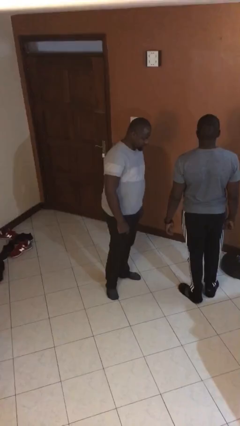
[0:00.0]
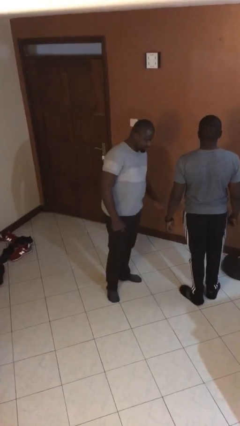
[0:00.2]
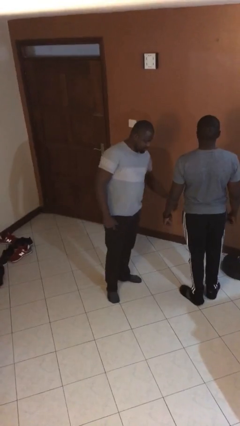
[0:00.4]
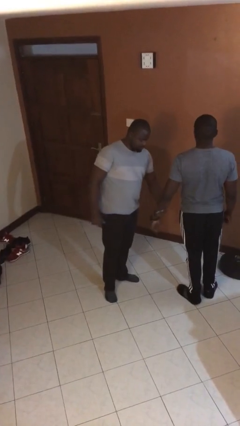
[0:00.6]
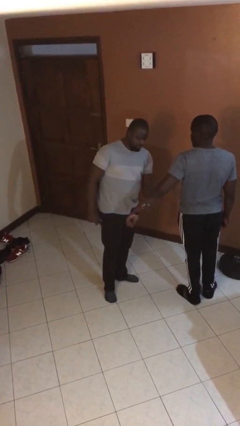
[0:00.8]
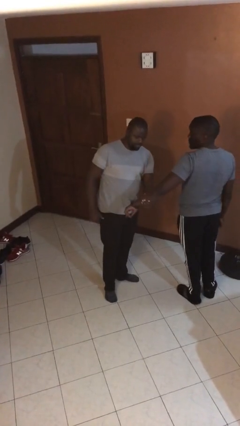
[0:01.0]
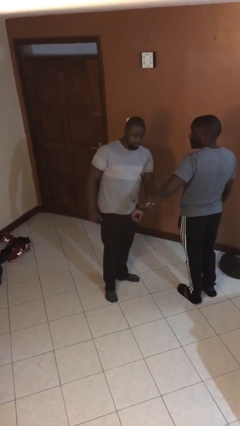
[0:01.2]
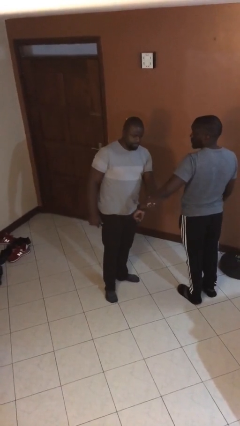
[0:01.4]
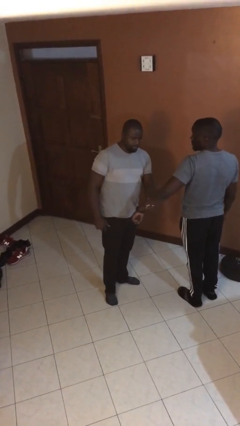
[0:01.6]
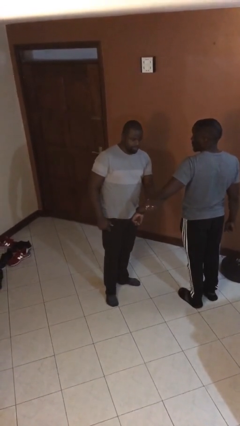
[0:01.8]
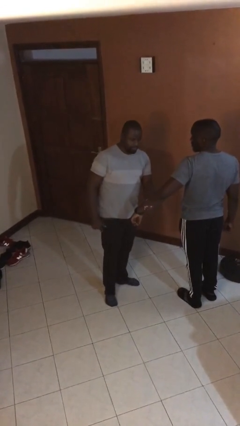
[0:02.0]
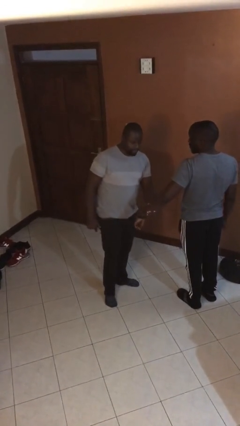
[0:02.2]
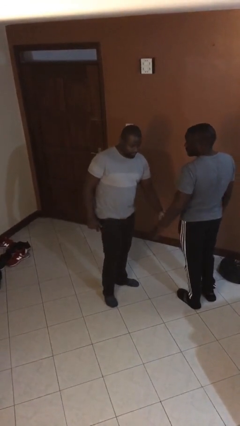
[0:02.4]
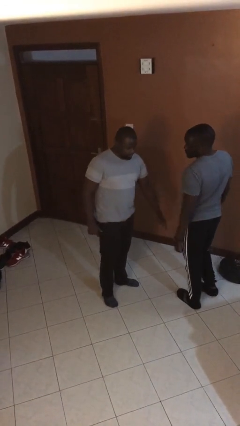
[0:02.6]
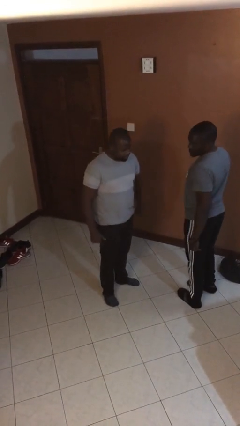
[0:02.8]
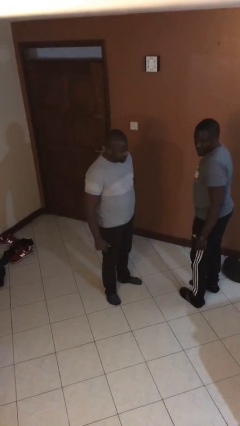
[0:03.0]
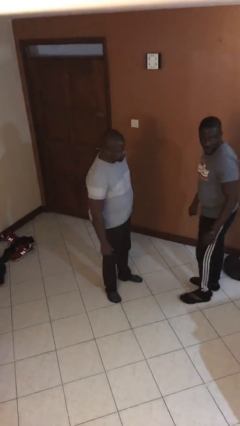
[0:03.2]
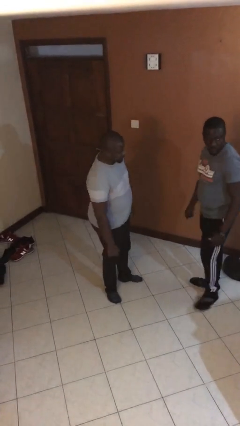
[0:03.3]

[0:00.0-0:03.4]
person grabs person by forearm

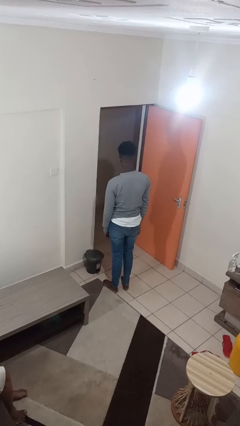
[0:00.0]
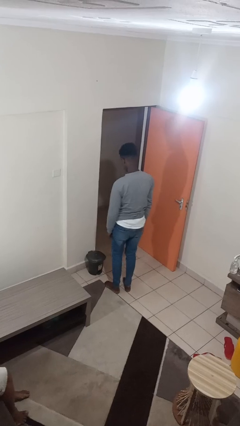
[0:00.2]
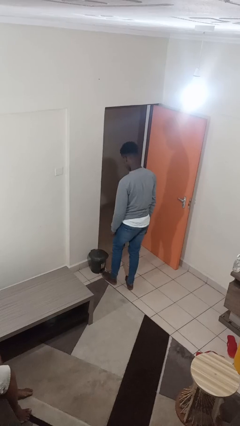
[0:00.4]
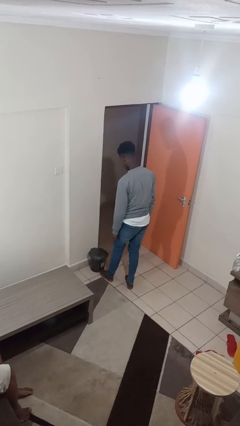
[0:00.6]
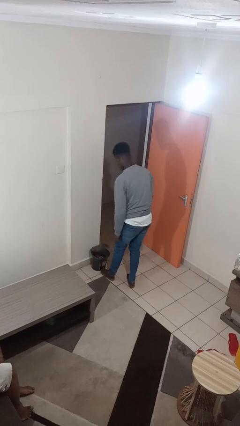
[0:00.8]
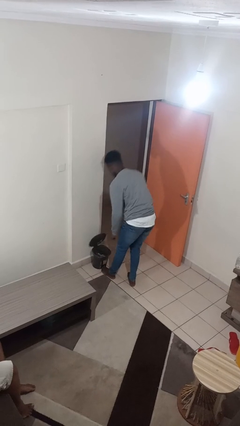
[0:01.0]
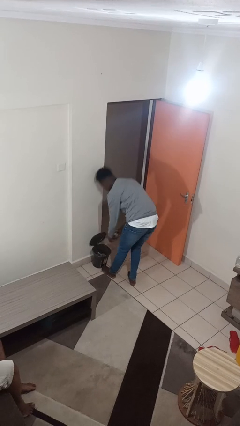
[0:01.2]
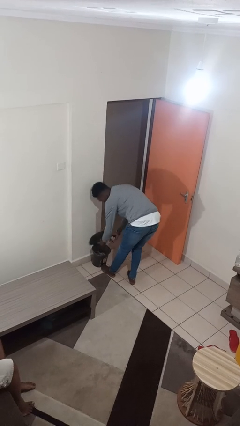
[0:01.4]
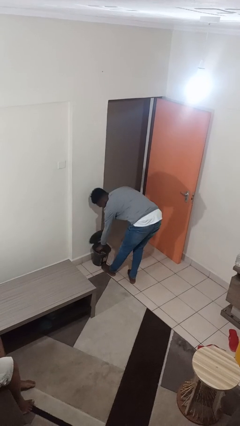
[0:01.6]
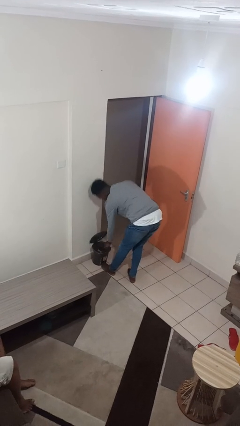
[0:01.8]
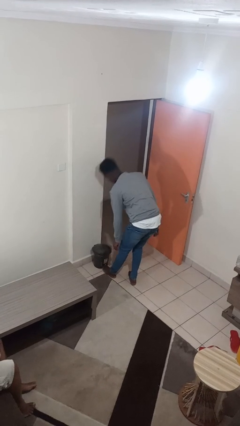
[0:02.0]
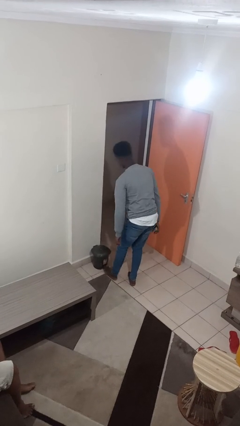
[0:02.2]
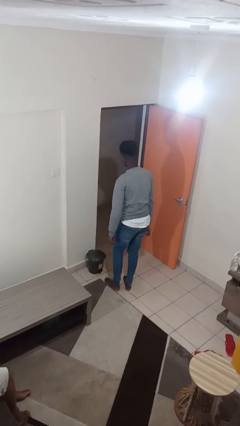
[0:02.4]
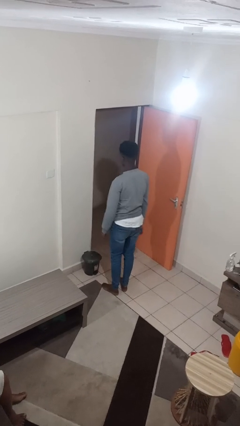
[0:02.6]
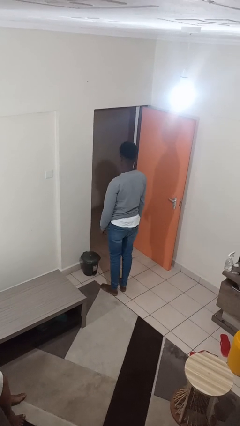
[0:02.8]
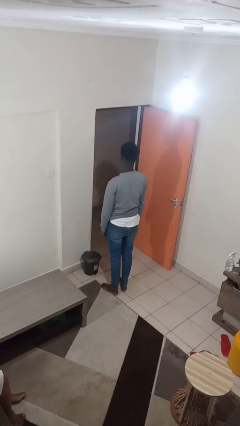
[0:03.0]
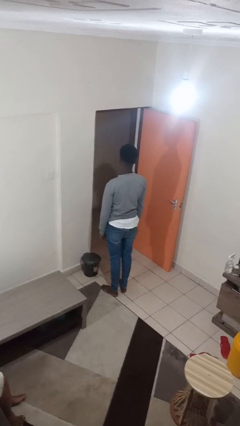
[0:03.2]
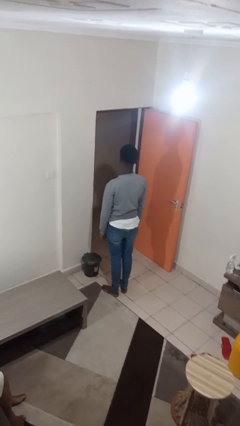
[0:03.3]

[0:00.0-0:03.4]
person discards trash

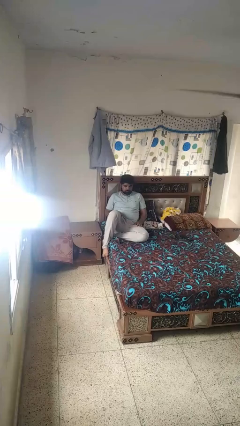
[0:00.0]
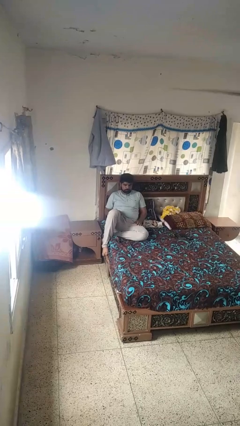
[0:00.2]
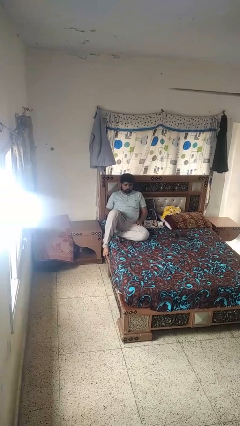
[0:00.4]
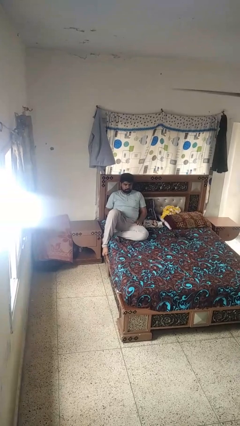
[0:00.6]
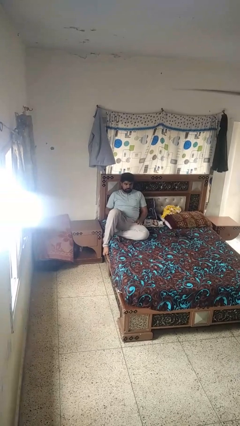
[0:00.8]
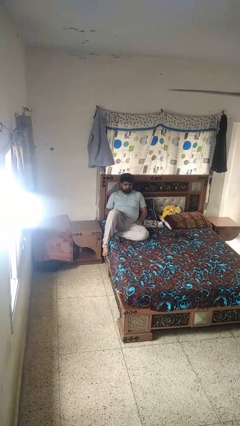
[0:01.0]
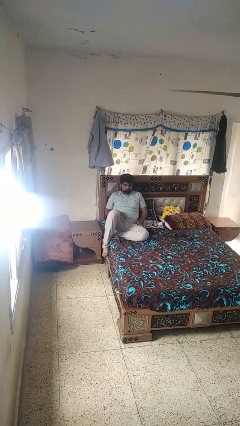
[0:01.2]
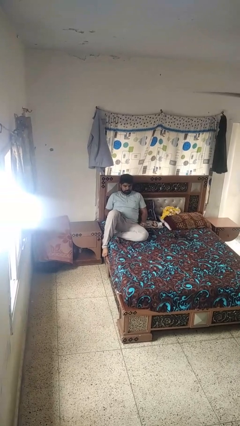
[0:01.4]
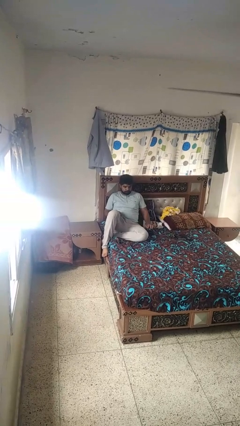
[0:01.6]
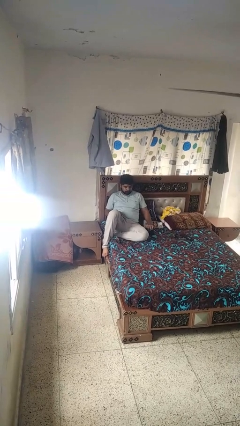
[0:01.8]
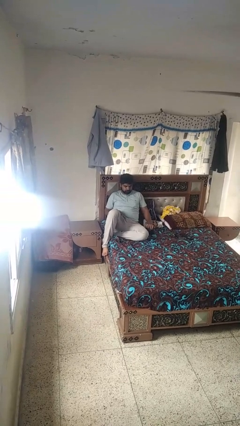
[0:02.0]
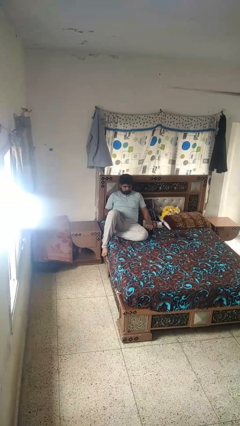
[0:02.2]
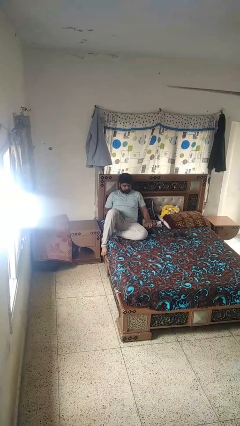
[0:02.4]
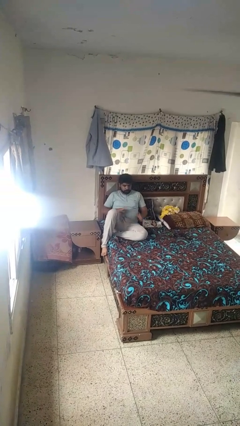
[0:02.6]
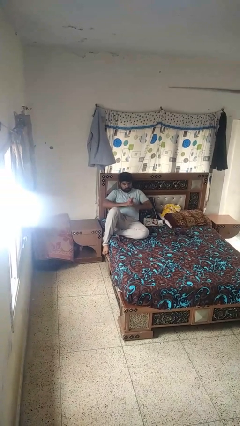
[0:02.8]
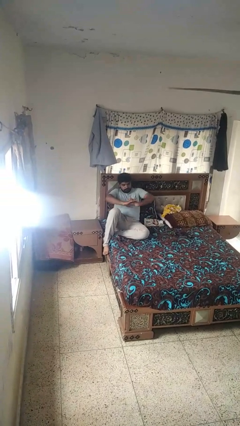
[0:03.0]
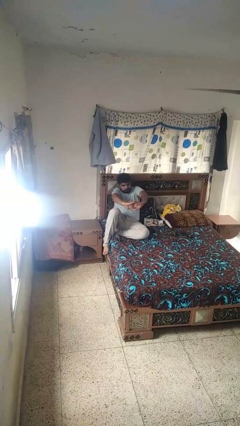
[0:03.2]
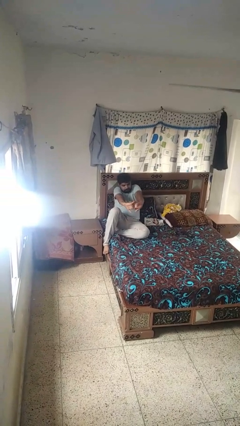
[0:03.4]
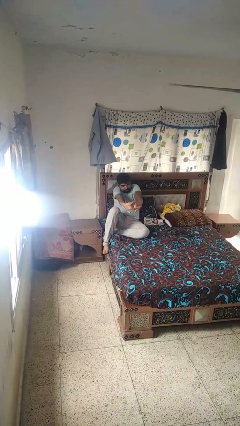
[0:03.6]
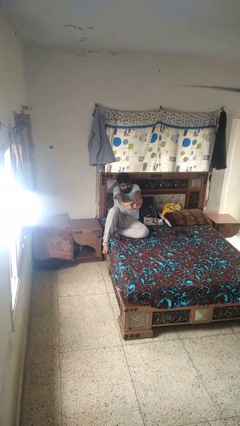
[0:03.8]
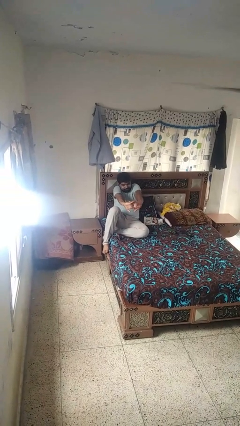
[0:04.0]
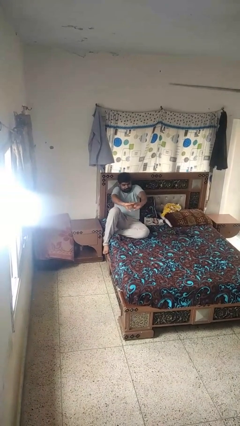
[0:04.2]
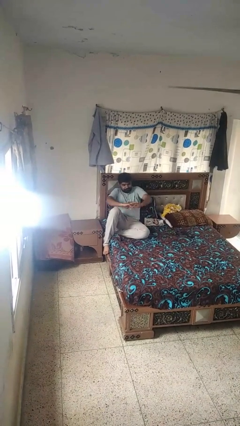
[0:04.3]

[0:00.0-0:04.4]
person cracks knuckles

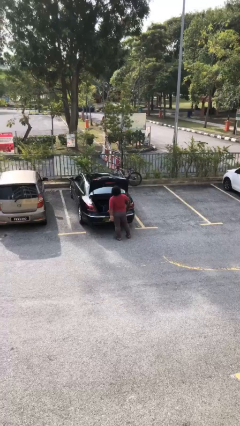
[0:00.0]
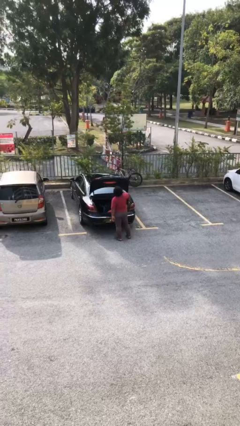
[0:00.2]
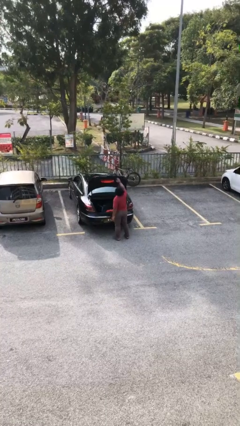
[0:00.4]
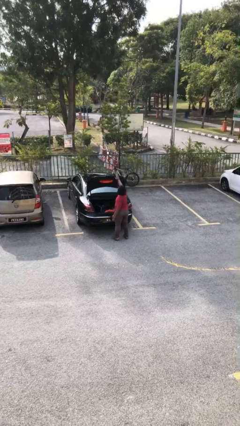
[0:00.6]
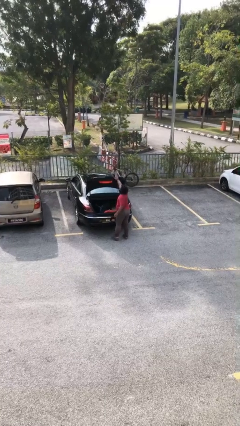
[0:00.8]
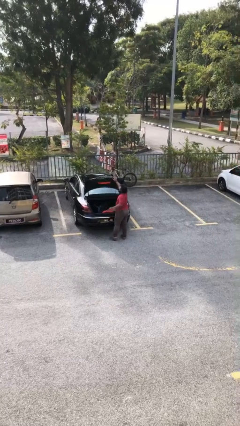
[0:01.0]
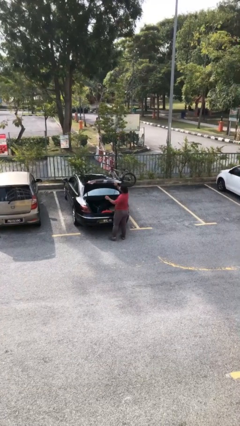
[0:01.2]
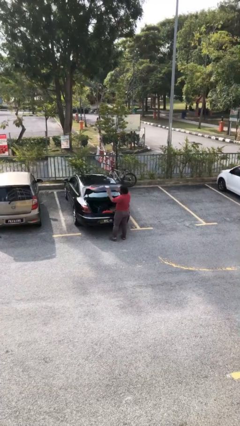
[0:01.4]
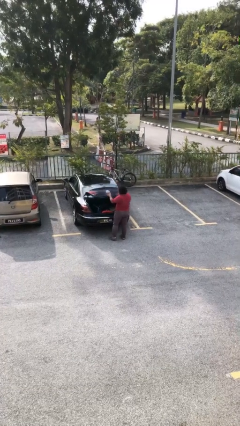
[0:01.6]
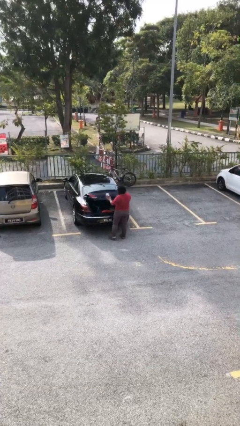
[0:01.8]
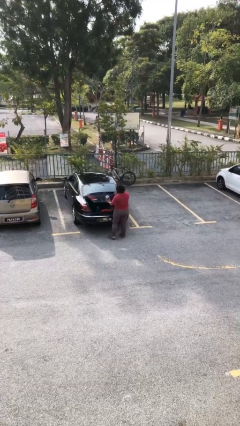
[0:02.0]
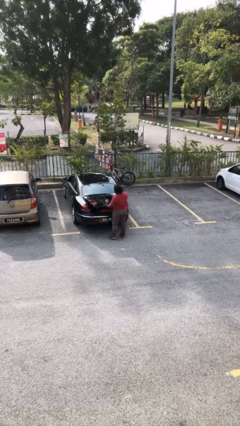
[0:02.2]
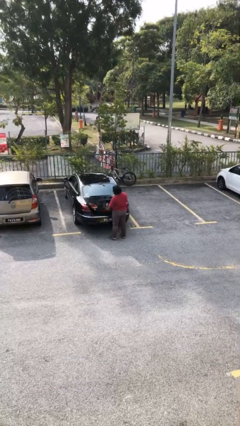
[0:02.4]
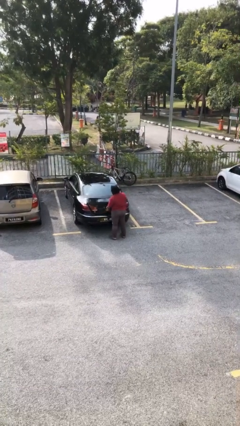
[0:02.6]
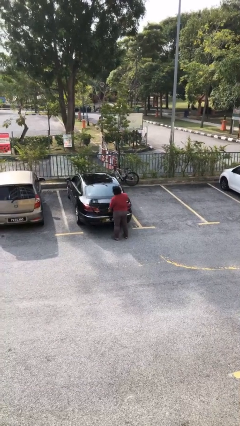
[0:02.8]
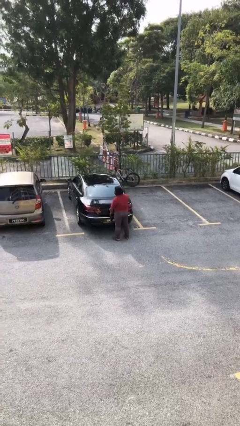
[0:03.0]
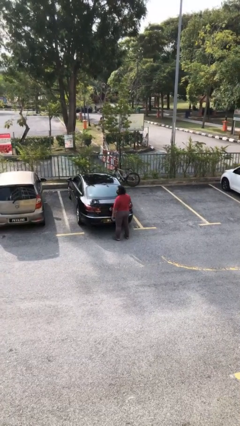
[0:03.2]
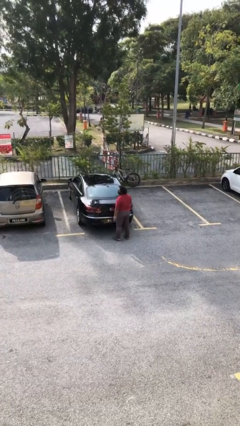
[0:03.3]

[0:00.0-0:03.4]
person closes car trunk

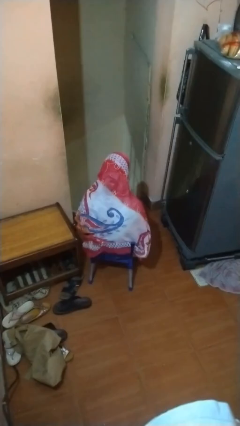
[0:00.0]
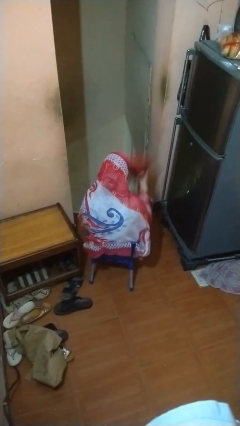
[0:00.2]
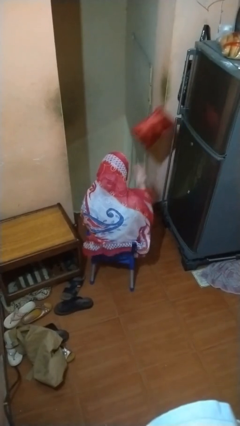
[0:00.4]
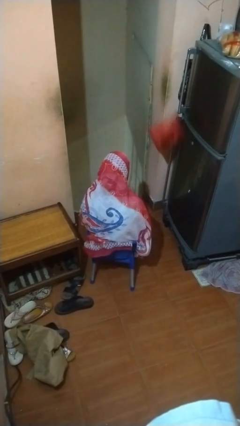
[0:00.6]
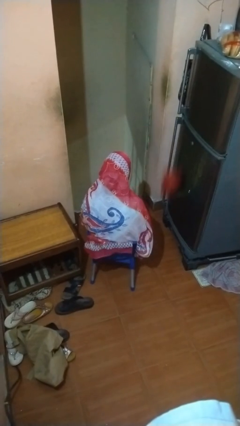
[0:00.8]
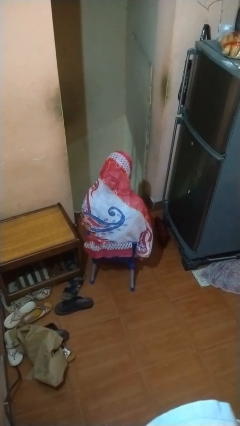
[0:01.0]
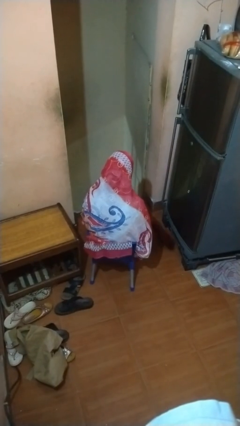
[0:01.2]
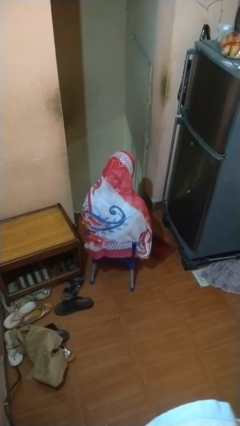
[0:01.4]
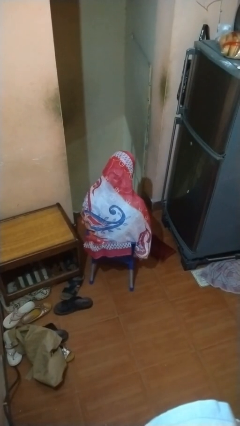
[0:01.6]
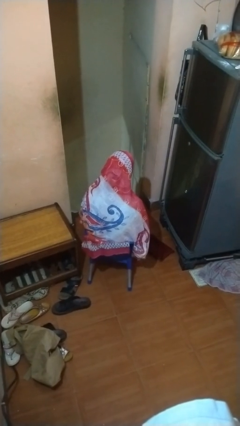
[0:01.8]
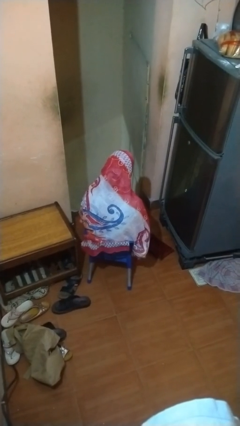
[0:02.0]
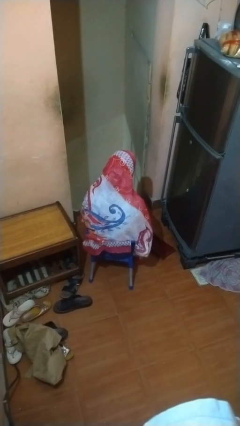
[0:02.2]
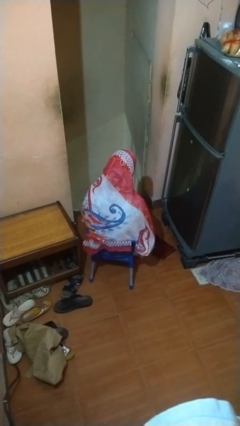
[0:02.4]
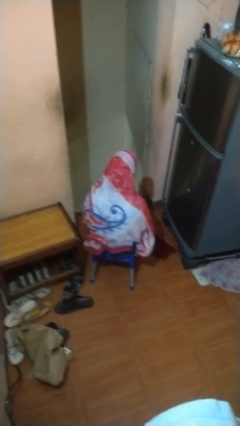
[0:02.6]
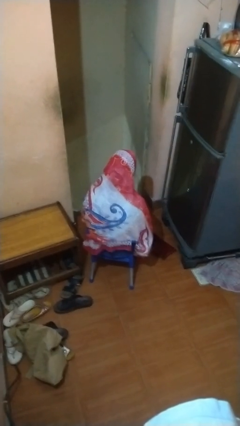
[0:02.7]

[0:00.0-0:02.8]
person throws object into air
